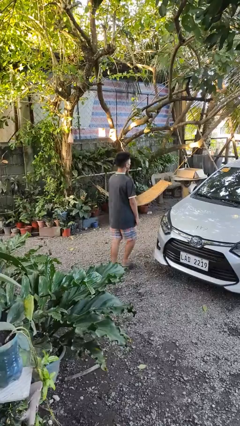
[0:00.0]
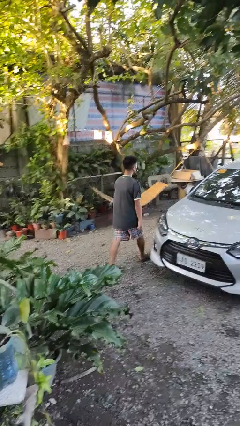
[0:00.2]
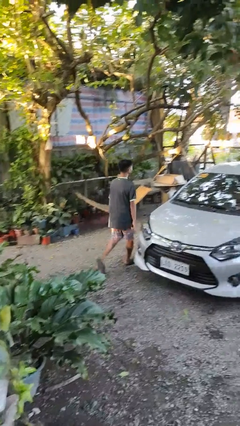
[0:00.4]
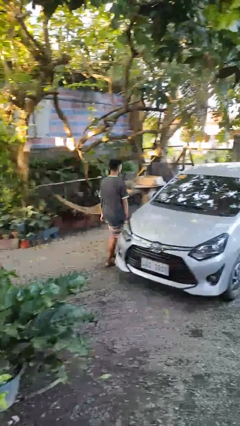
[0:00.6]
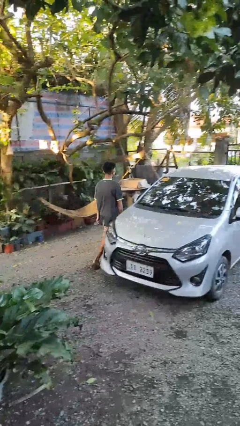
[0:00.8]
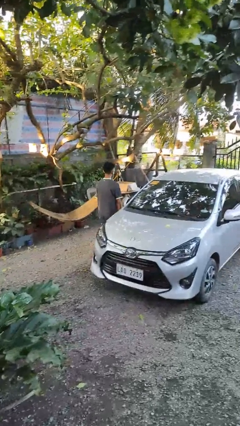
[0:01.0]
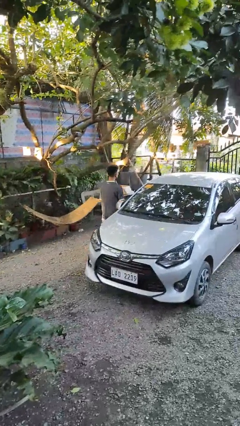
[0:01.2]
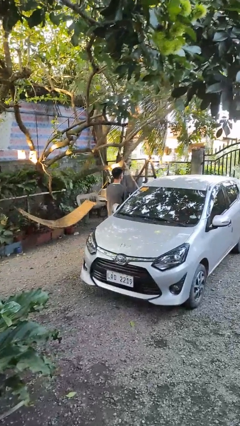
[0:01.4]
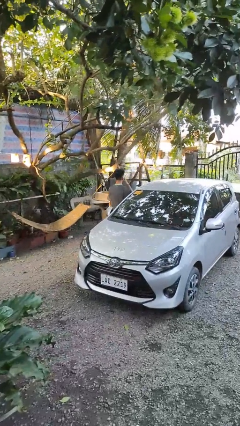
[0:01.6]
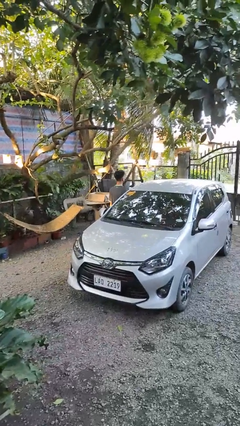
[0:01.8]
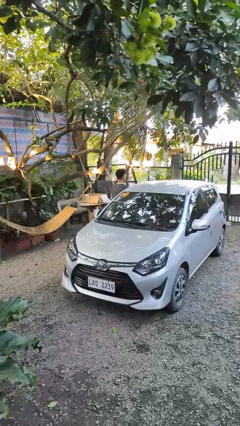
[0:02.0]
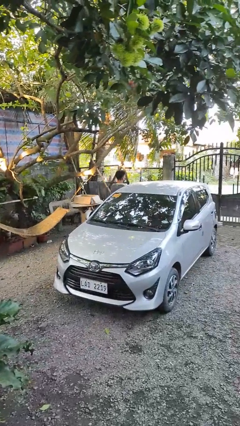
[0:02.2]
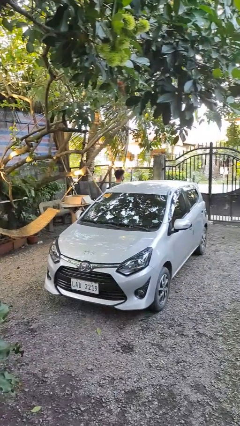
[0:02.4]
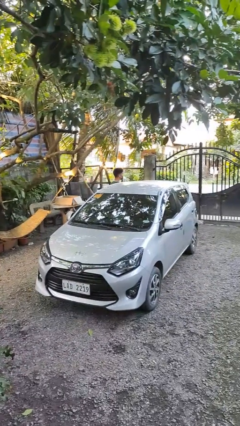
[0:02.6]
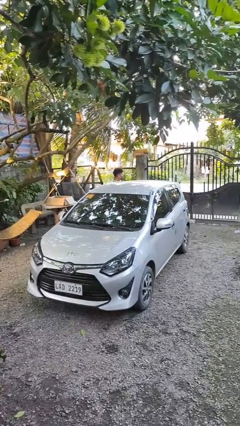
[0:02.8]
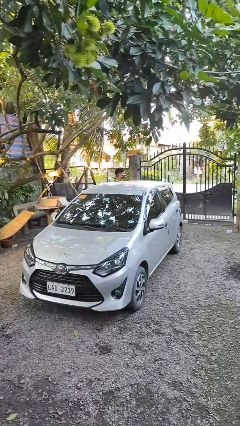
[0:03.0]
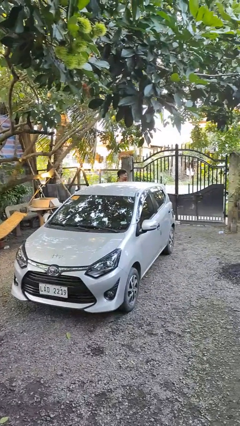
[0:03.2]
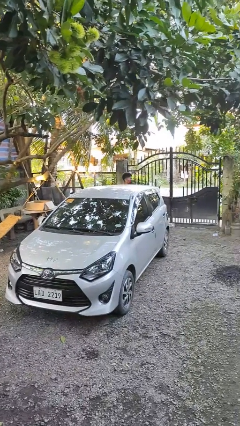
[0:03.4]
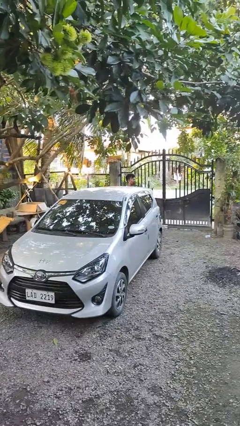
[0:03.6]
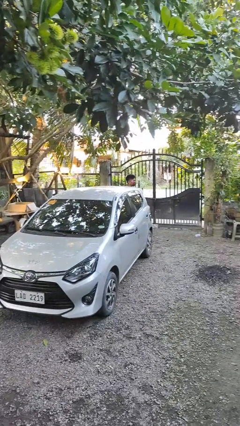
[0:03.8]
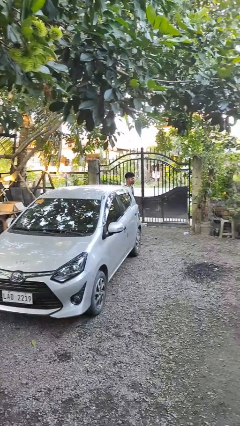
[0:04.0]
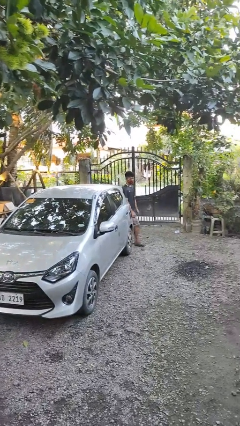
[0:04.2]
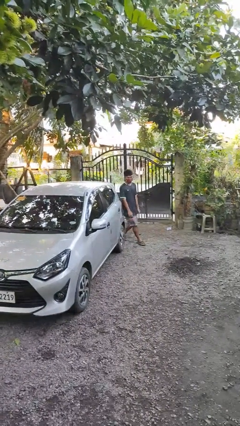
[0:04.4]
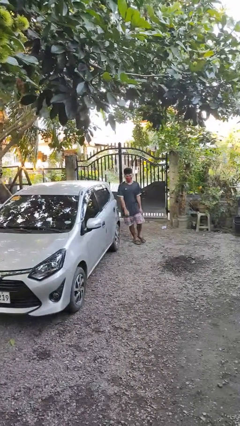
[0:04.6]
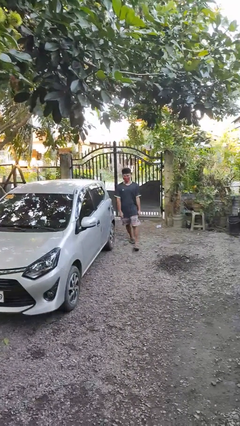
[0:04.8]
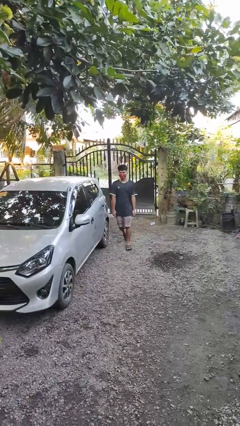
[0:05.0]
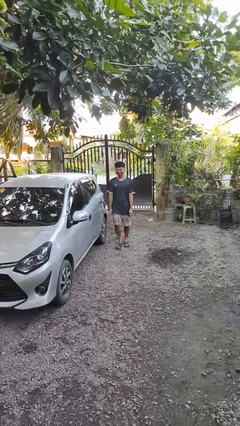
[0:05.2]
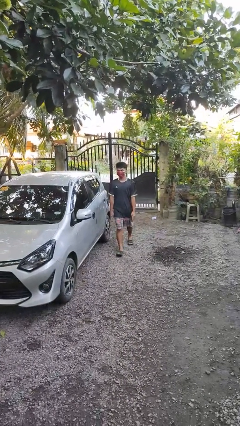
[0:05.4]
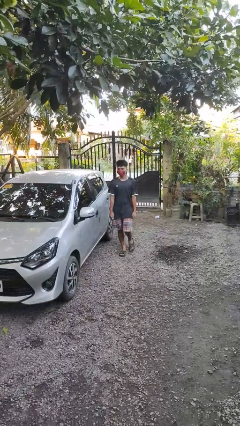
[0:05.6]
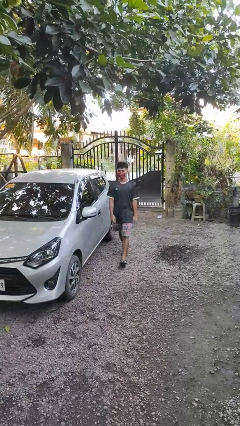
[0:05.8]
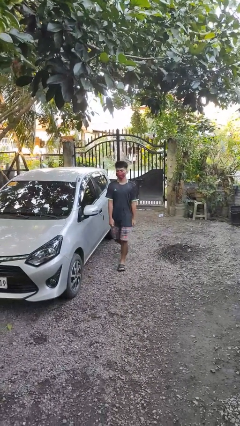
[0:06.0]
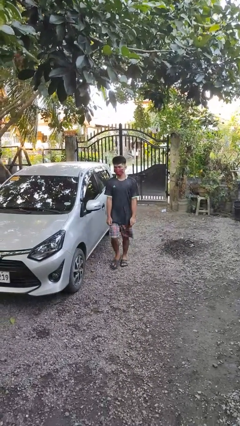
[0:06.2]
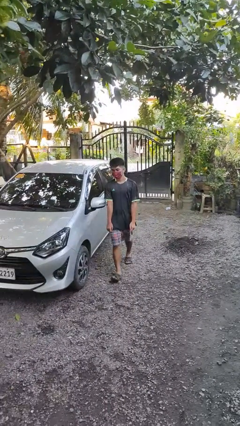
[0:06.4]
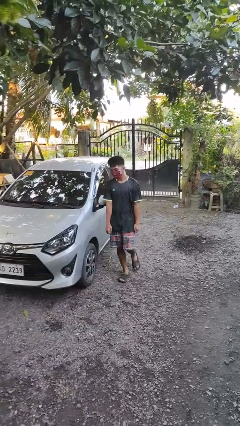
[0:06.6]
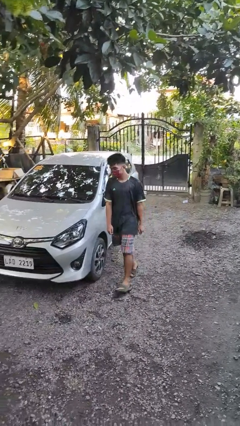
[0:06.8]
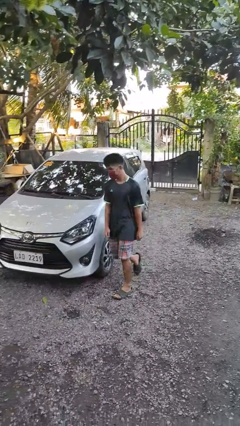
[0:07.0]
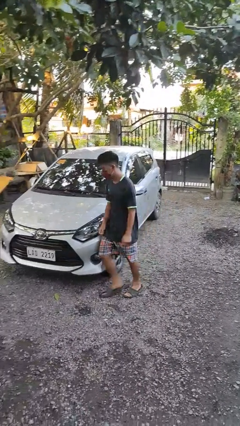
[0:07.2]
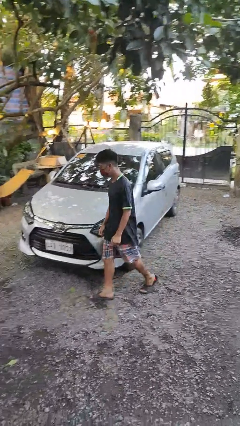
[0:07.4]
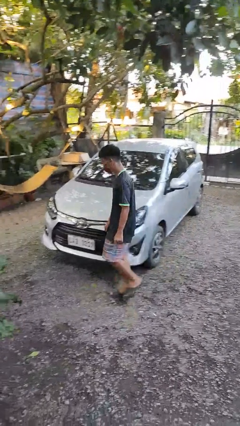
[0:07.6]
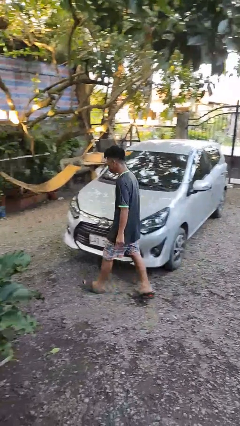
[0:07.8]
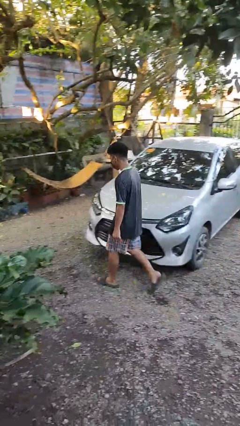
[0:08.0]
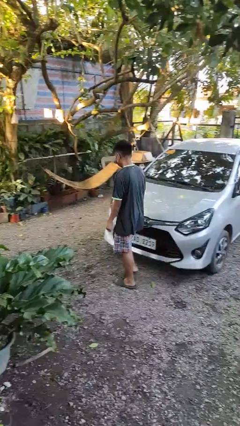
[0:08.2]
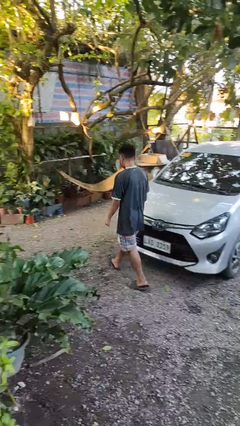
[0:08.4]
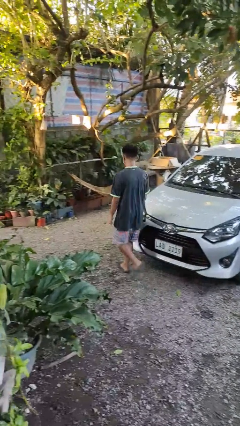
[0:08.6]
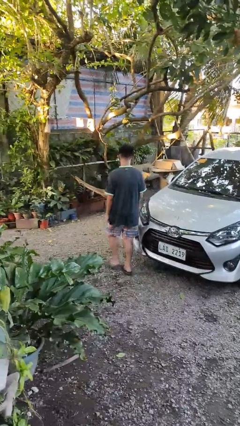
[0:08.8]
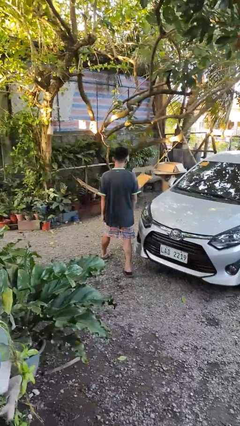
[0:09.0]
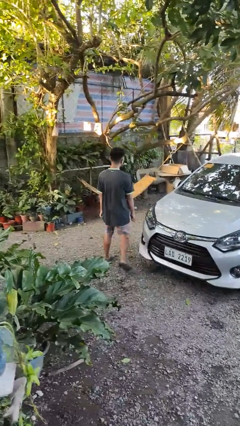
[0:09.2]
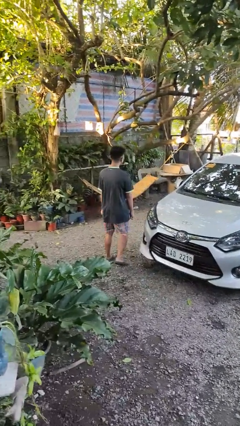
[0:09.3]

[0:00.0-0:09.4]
person walks around car

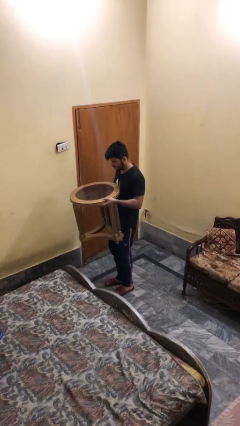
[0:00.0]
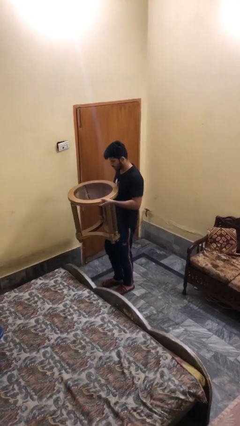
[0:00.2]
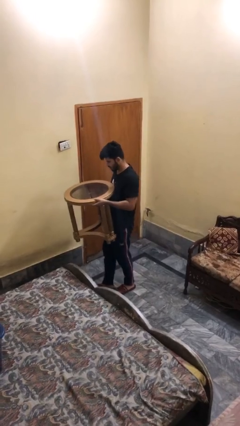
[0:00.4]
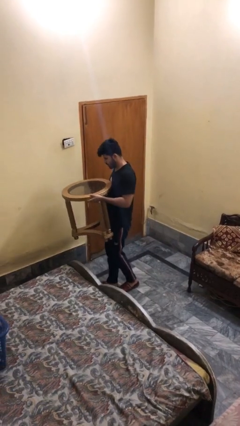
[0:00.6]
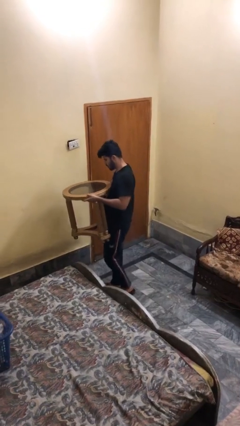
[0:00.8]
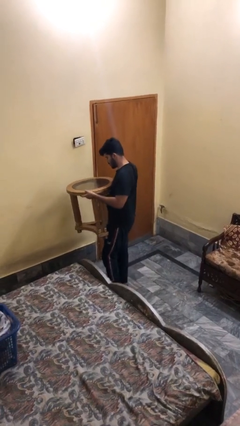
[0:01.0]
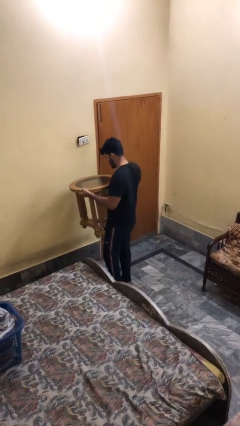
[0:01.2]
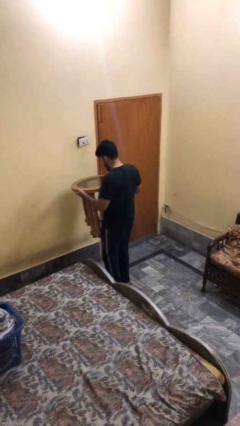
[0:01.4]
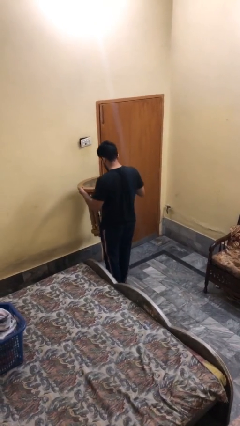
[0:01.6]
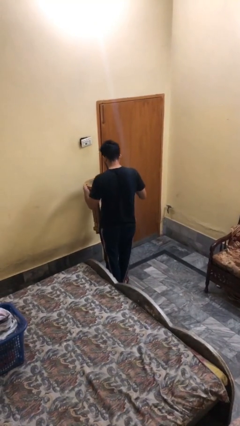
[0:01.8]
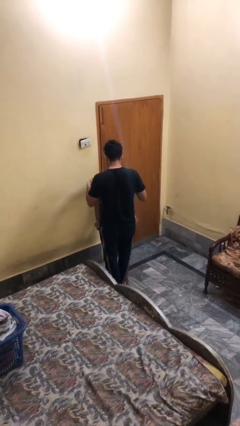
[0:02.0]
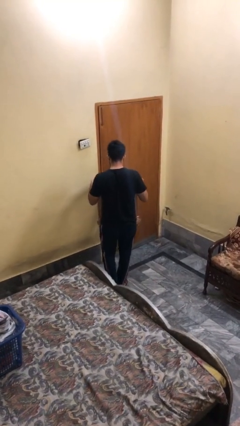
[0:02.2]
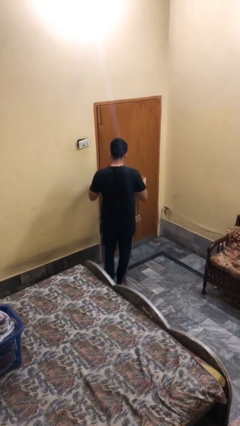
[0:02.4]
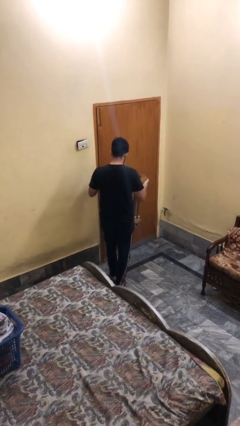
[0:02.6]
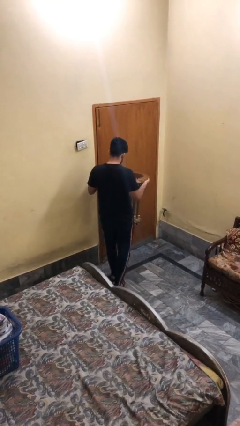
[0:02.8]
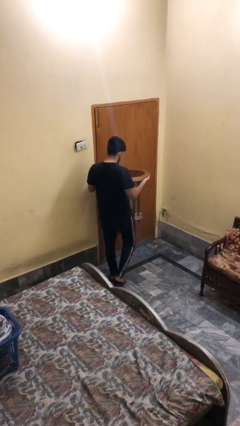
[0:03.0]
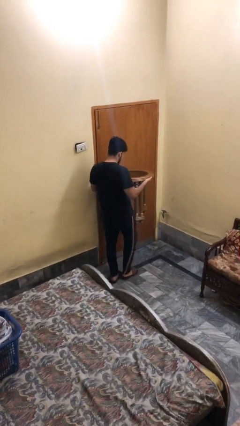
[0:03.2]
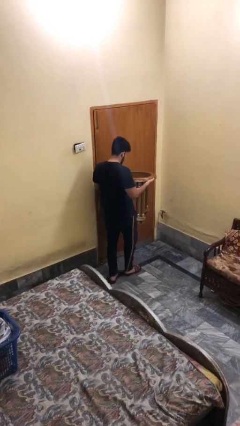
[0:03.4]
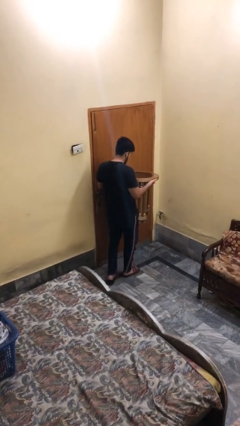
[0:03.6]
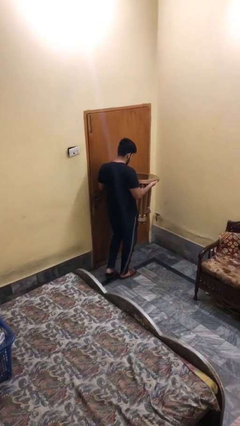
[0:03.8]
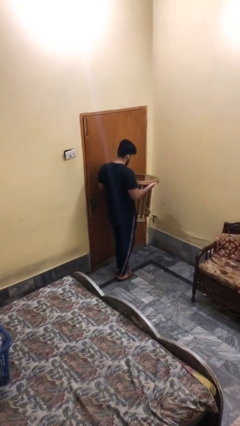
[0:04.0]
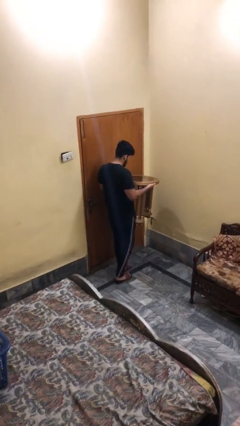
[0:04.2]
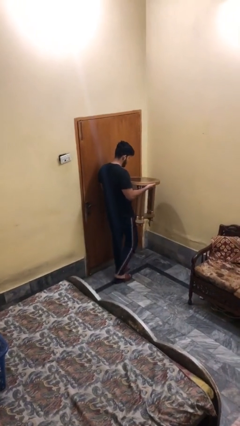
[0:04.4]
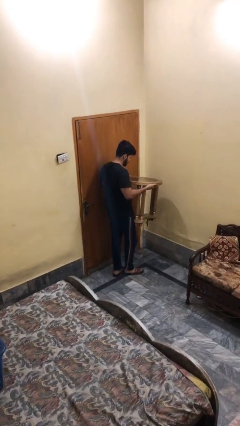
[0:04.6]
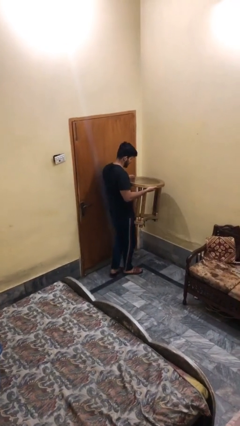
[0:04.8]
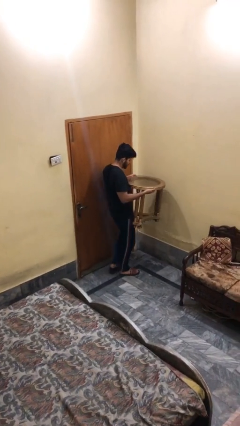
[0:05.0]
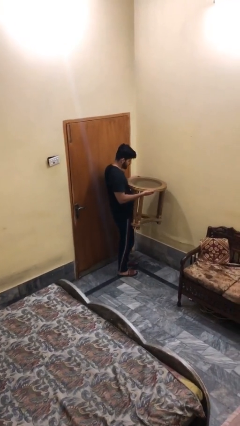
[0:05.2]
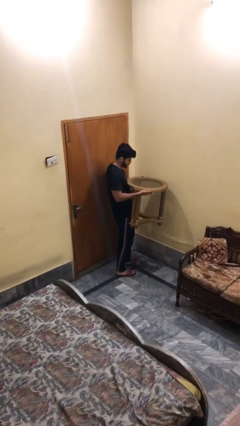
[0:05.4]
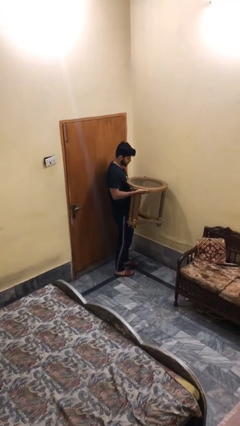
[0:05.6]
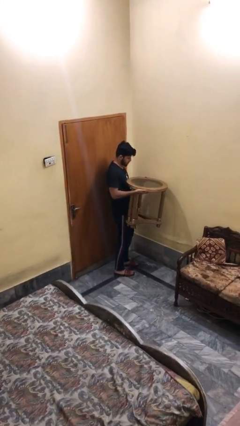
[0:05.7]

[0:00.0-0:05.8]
person carries furniture

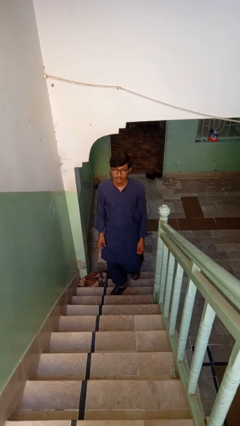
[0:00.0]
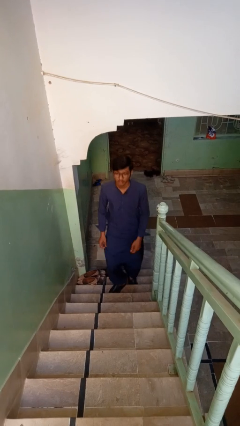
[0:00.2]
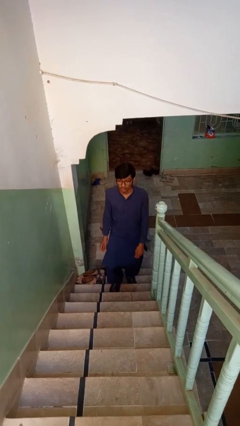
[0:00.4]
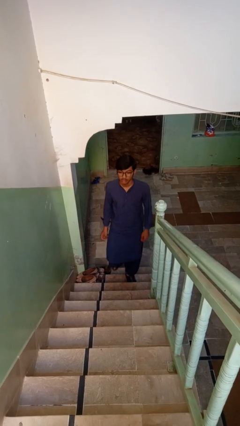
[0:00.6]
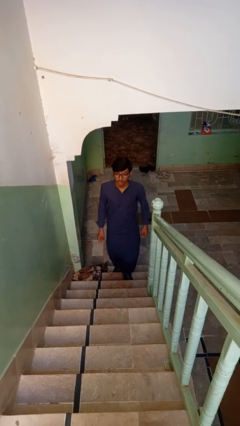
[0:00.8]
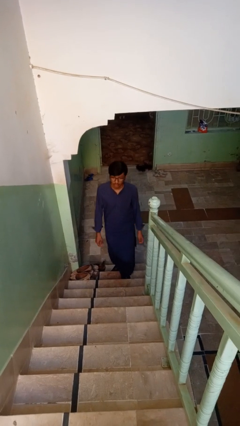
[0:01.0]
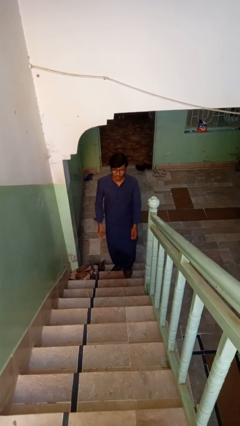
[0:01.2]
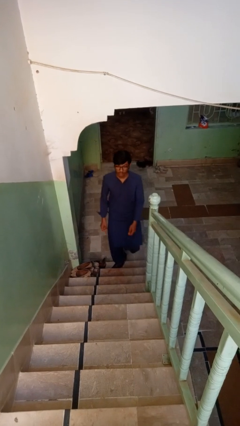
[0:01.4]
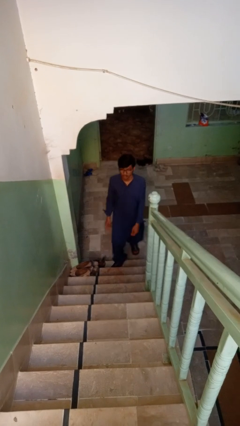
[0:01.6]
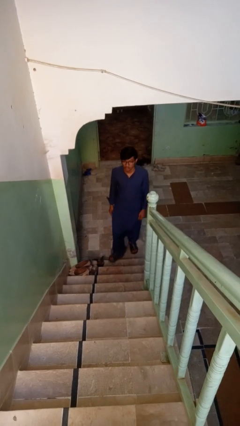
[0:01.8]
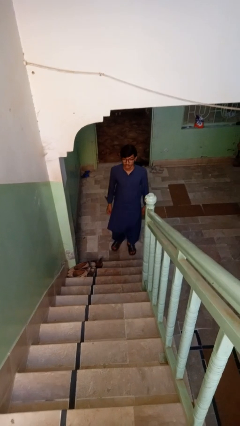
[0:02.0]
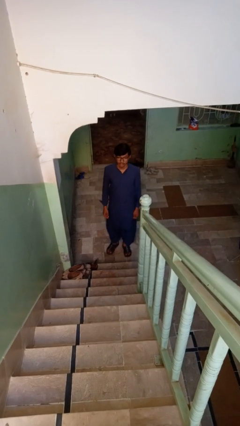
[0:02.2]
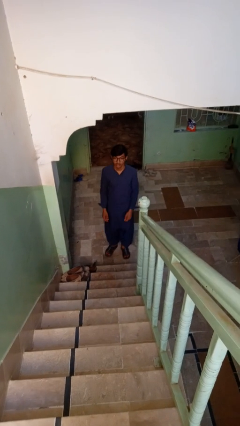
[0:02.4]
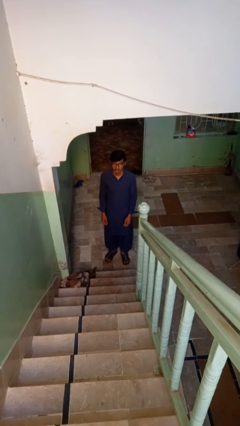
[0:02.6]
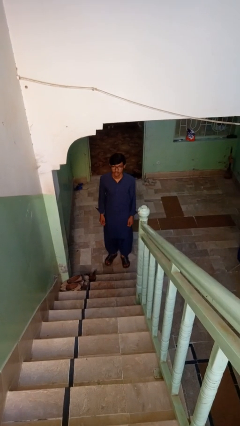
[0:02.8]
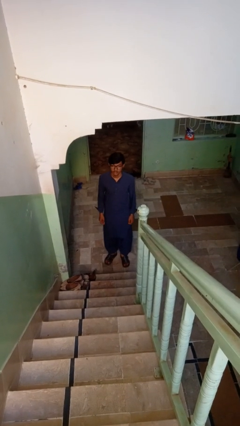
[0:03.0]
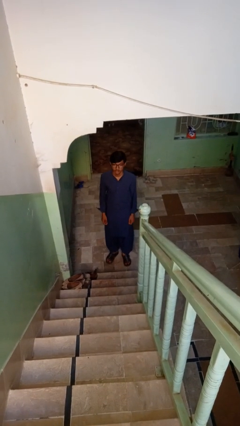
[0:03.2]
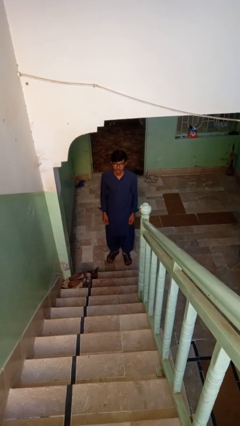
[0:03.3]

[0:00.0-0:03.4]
person climbs down stairs
